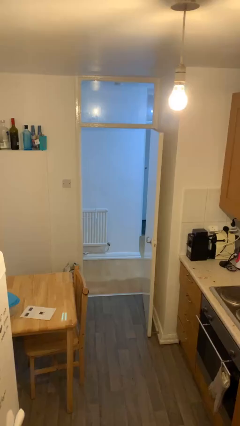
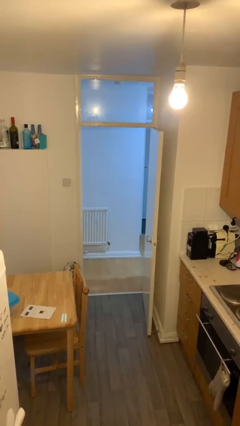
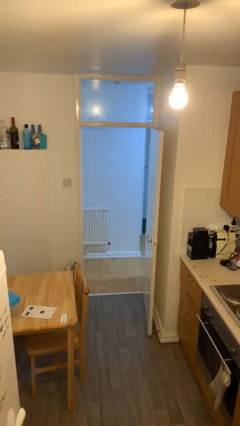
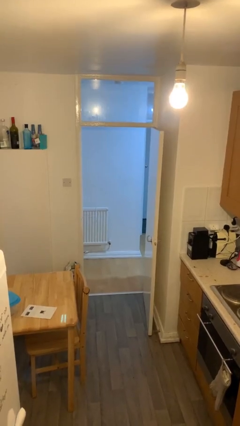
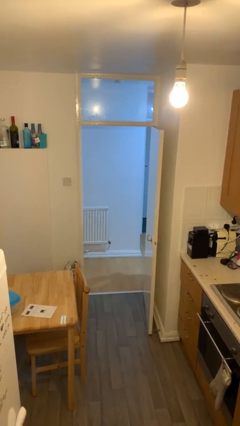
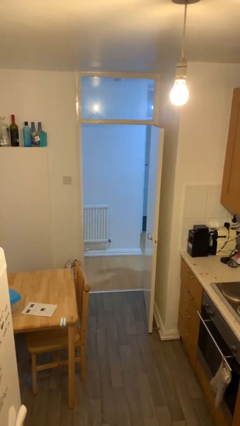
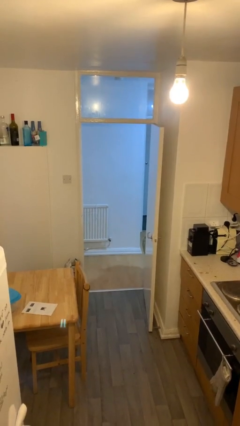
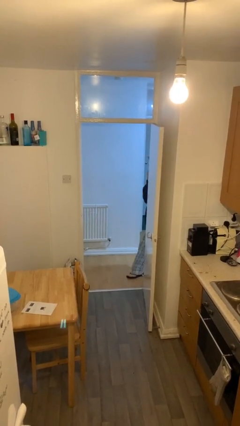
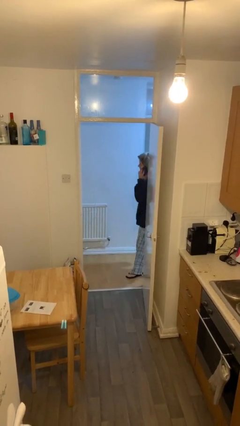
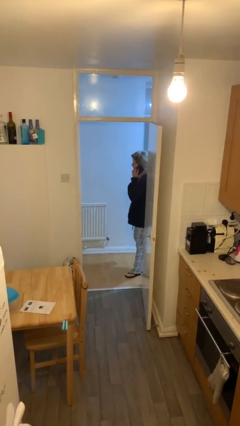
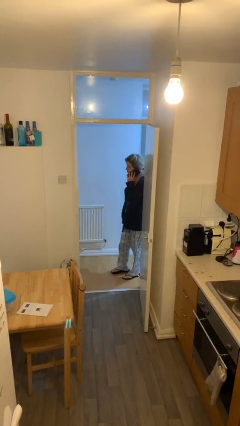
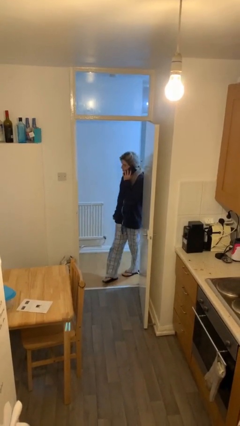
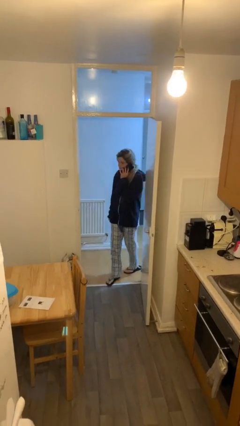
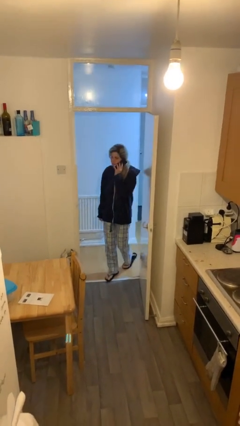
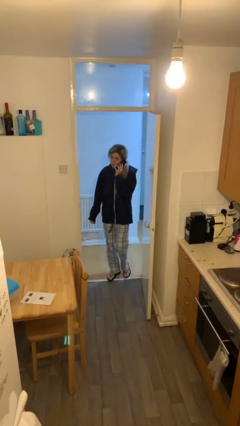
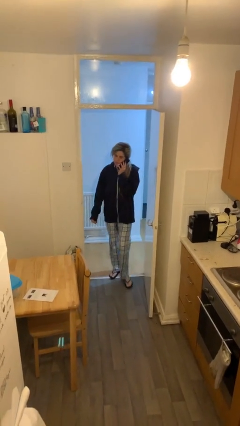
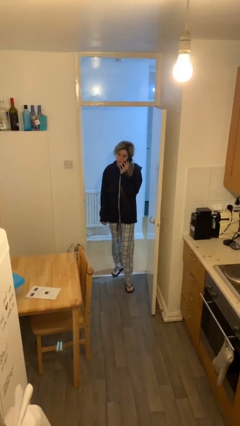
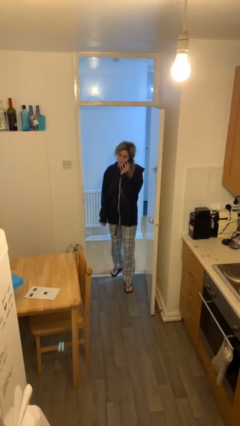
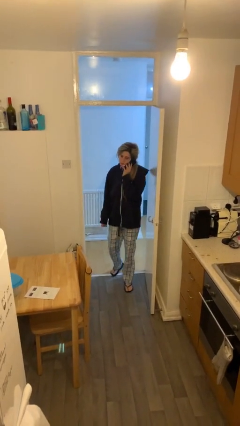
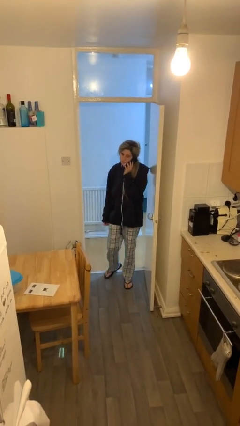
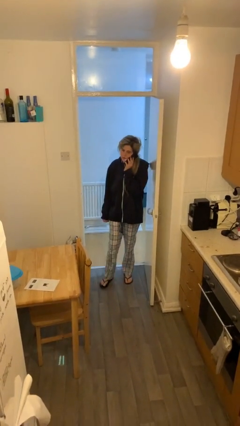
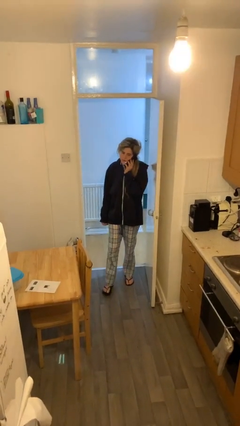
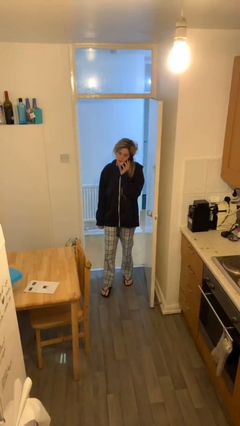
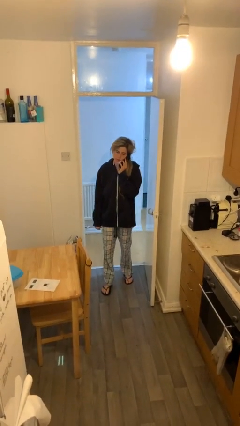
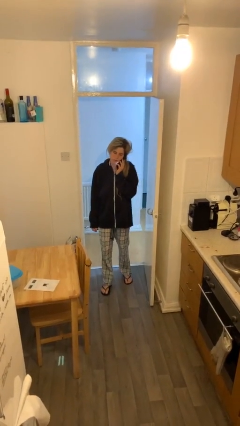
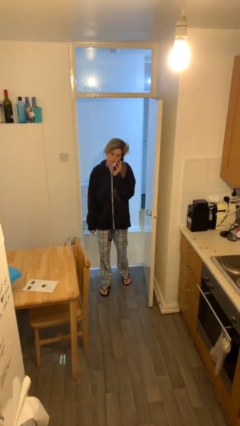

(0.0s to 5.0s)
person enters scene through structure

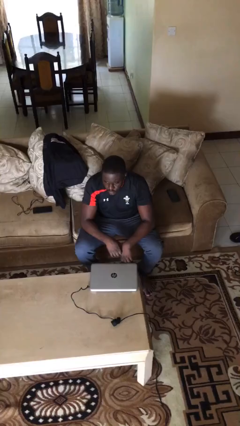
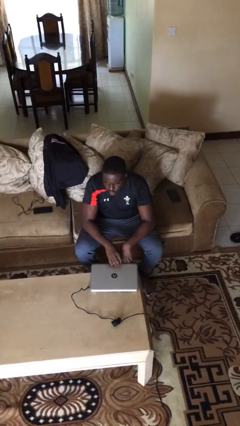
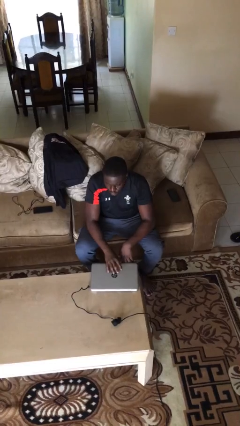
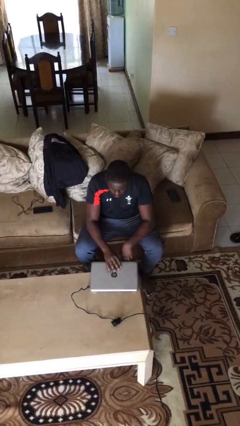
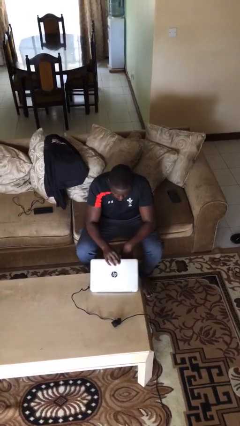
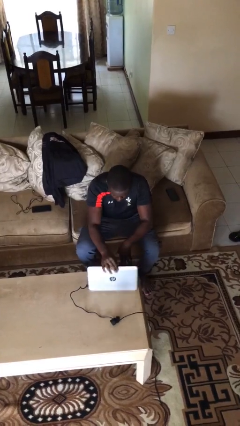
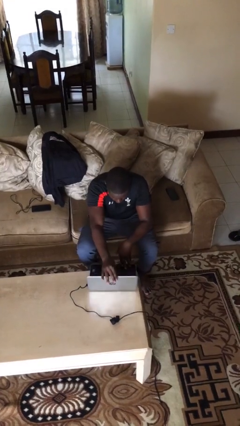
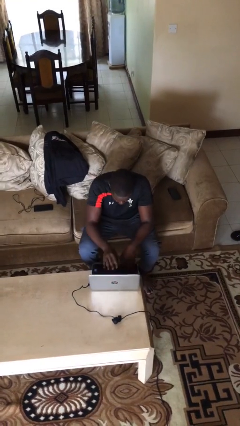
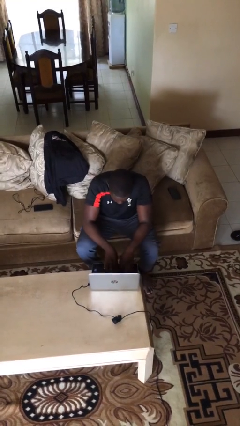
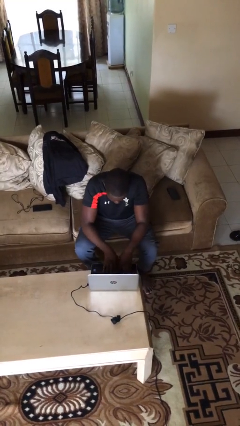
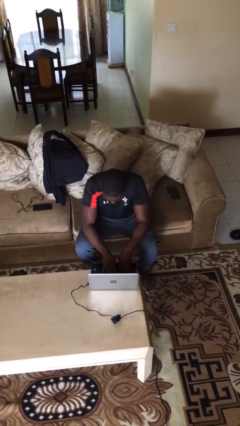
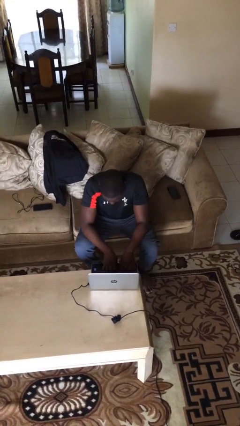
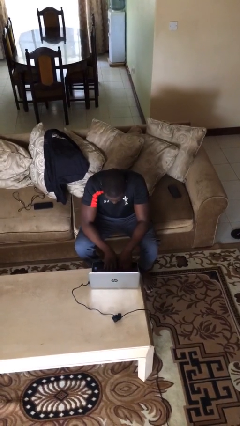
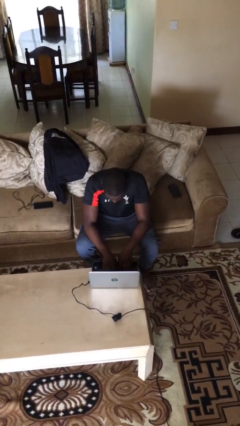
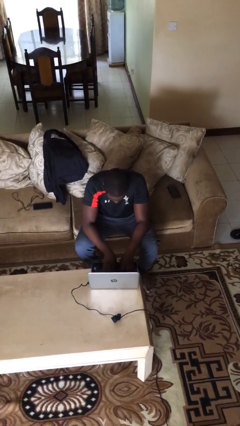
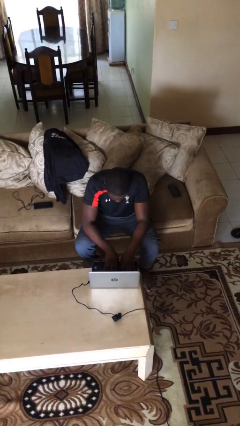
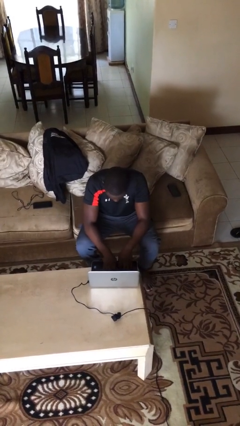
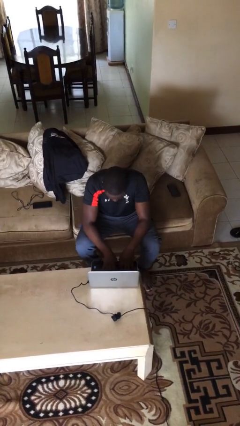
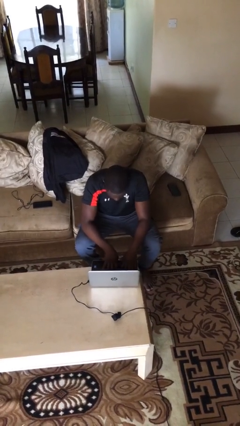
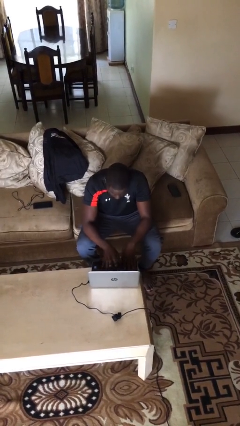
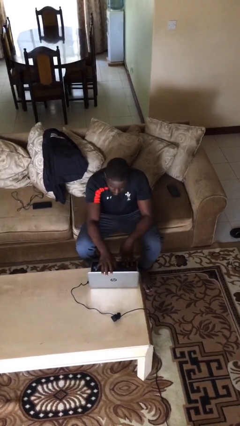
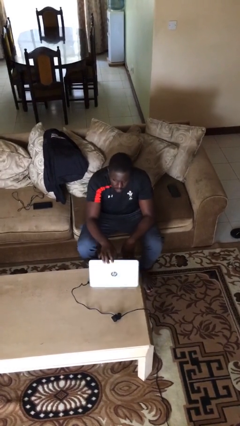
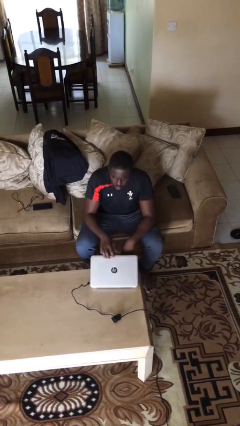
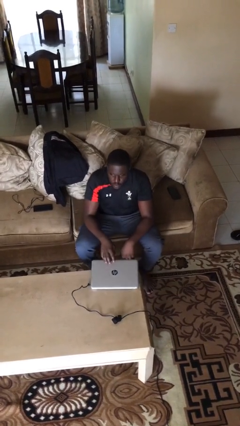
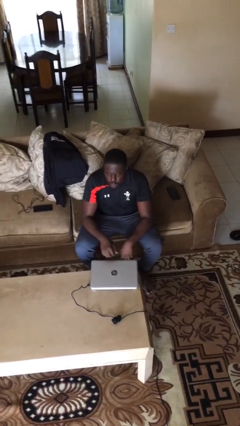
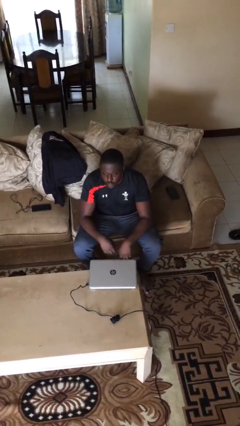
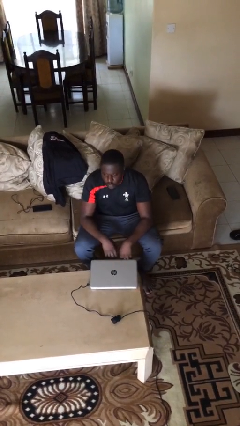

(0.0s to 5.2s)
person interacts with laptop

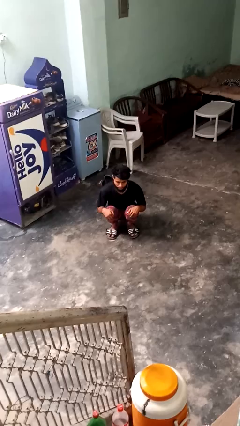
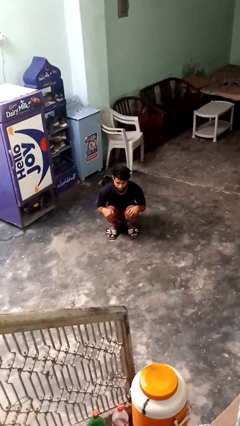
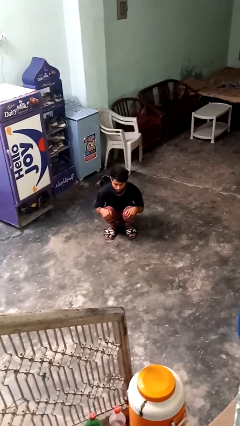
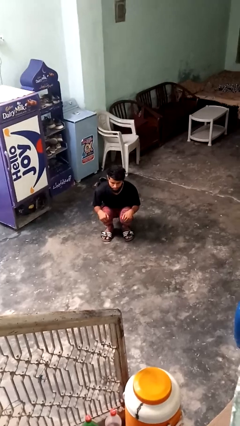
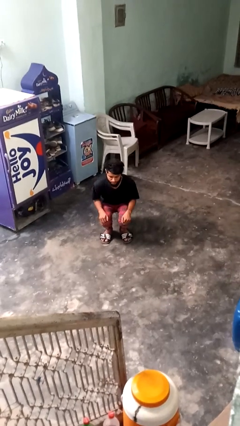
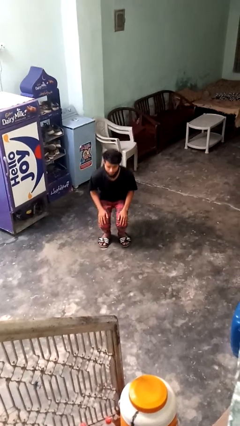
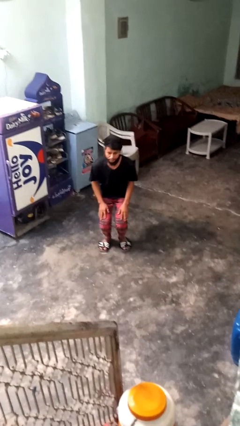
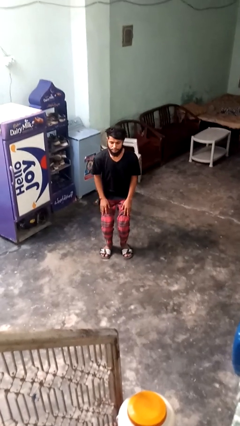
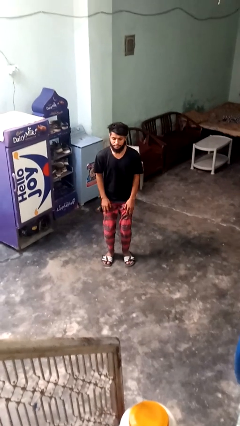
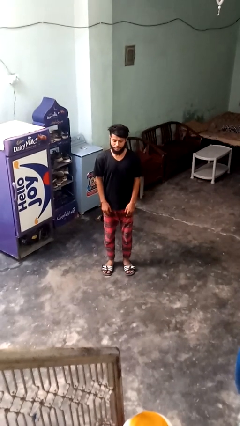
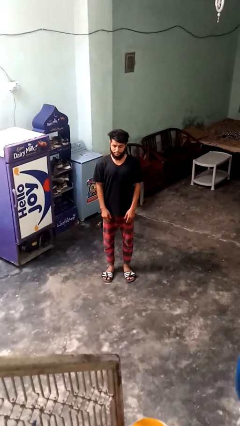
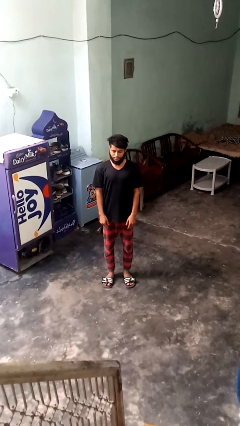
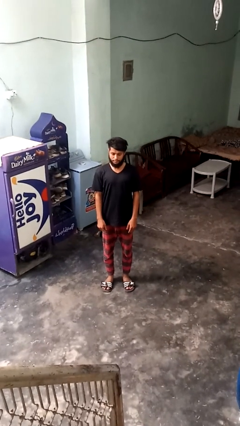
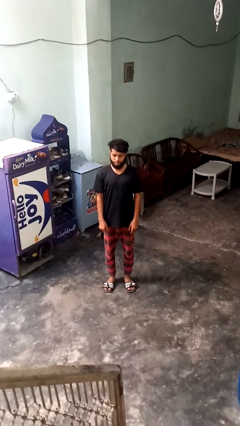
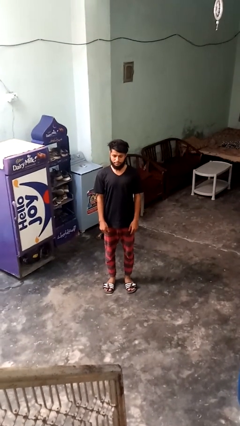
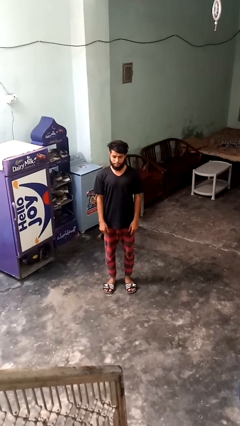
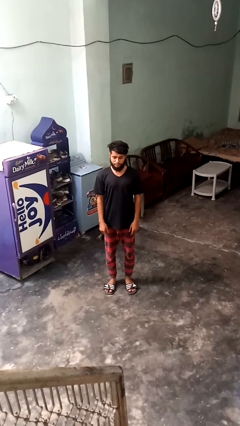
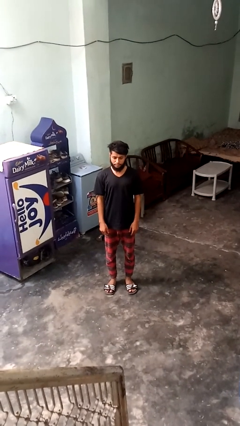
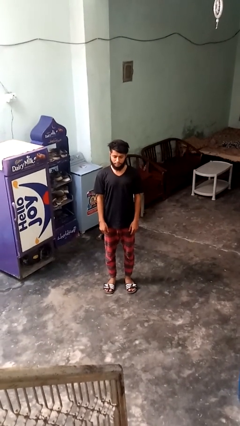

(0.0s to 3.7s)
person stands up

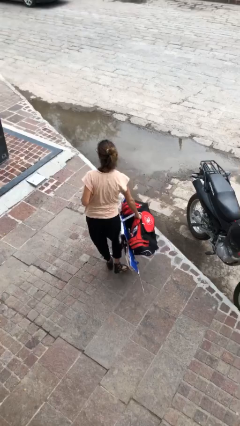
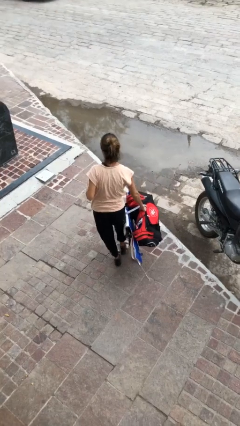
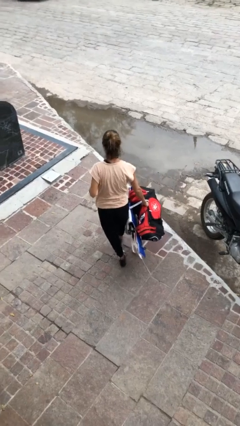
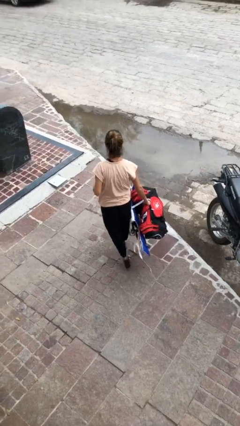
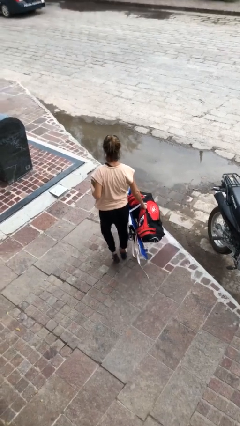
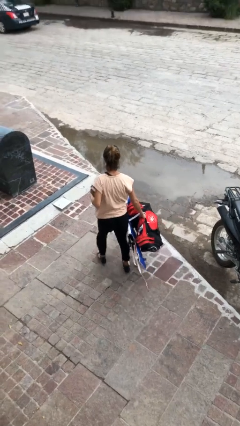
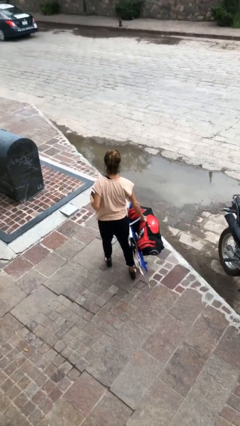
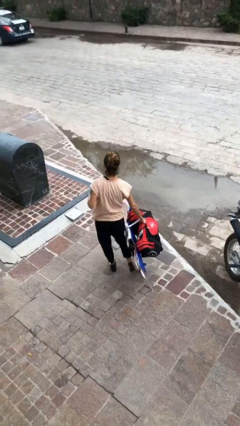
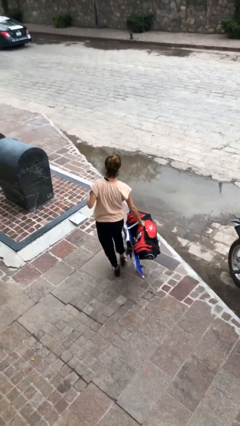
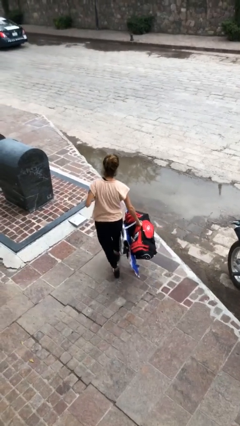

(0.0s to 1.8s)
person carries heavy object

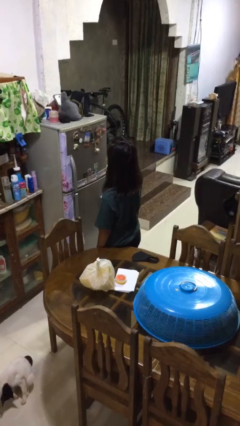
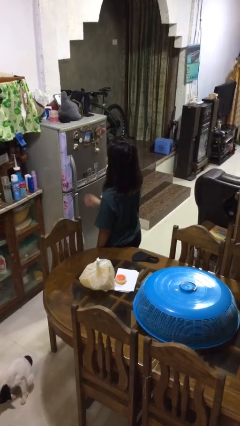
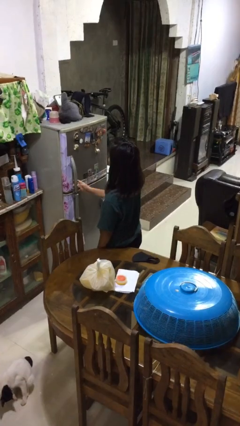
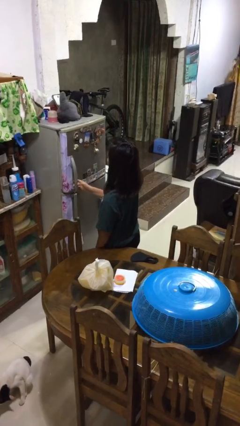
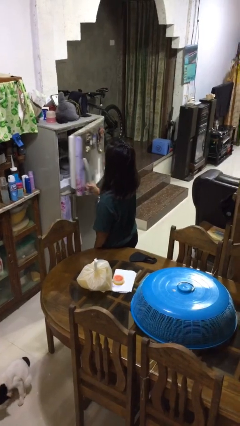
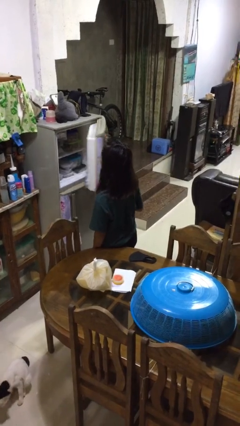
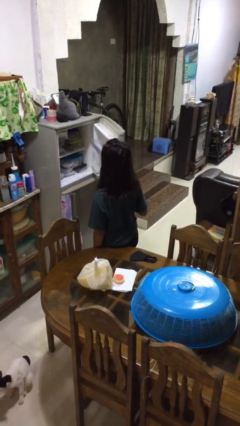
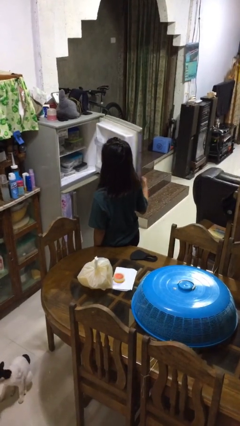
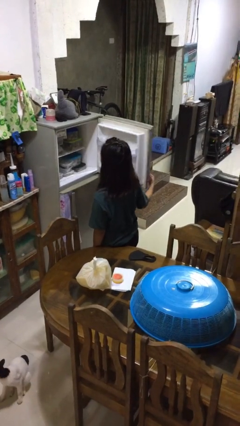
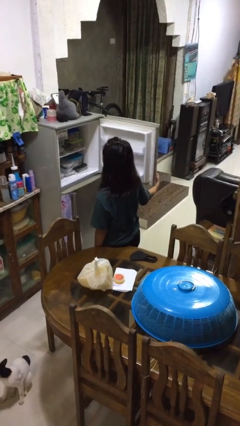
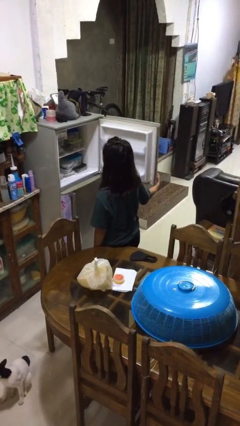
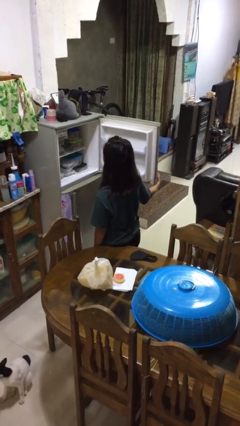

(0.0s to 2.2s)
person opens refrigerator
